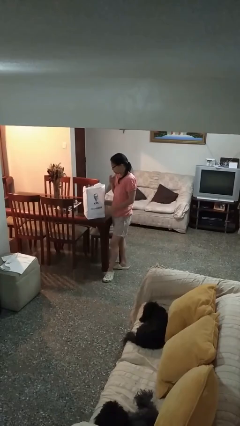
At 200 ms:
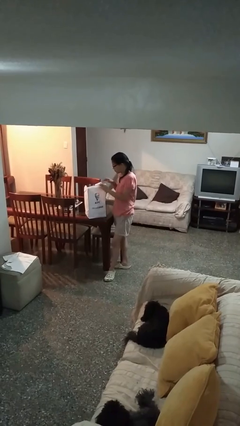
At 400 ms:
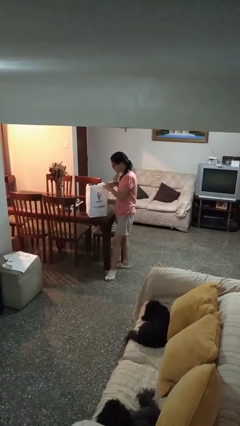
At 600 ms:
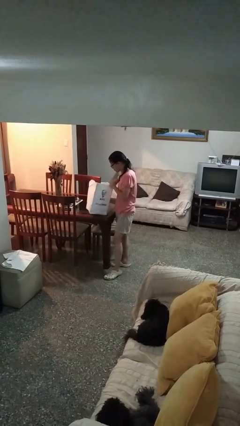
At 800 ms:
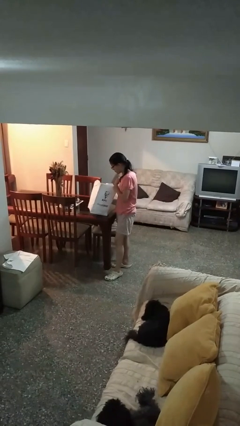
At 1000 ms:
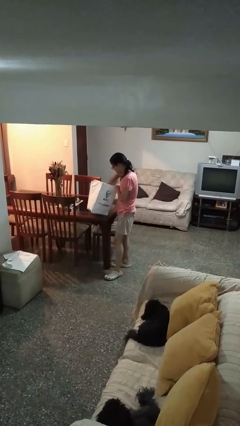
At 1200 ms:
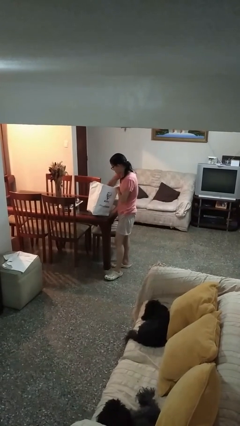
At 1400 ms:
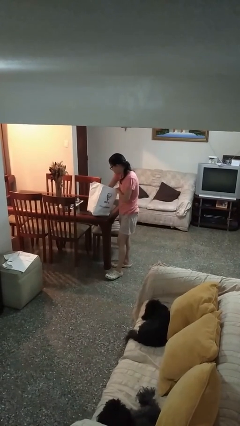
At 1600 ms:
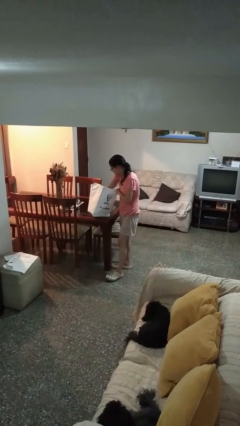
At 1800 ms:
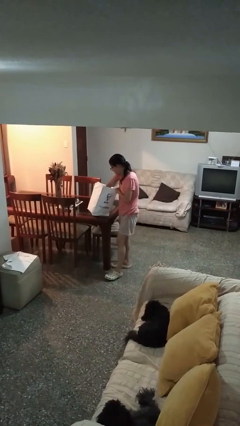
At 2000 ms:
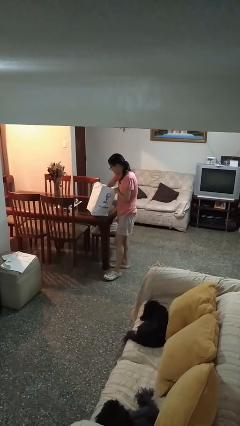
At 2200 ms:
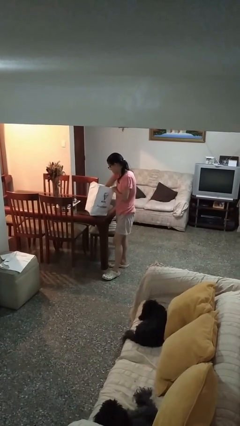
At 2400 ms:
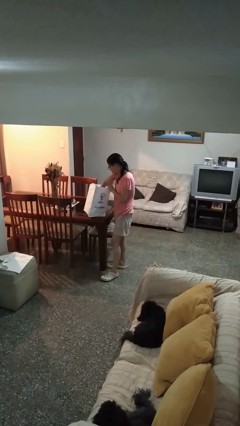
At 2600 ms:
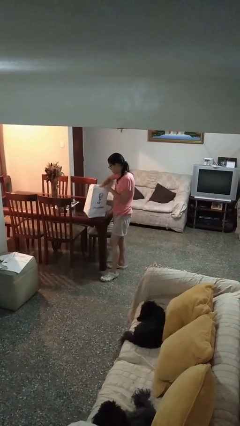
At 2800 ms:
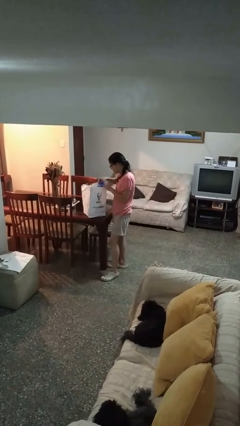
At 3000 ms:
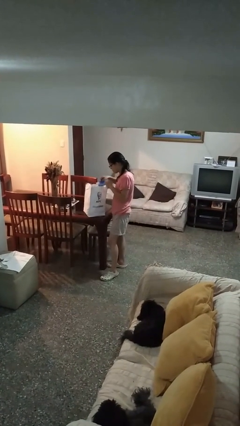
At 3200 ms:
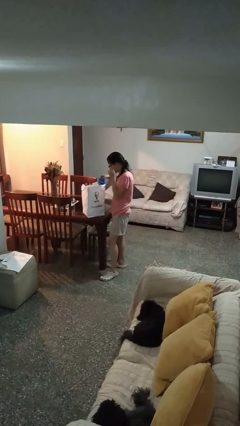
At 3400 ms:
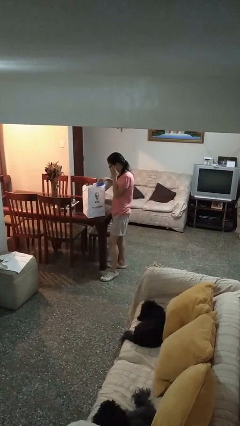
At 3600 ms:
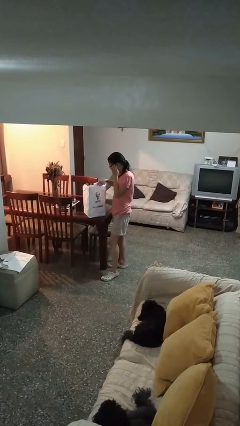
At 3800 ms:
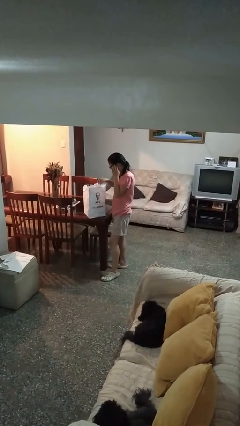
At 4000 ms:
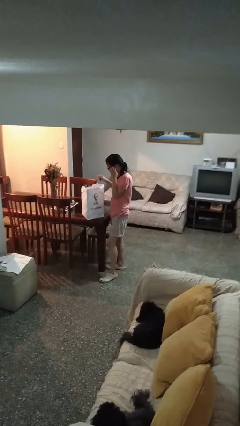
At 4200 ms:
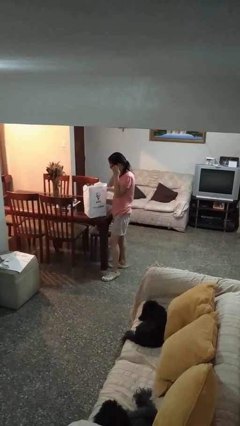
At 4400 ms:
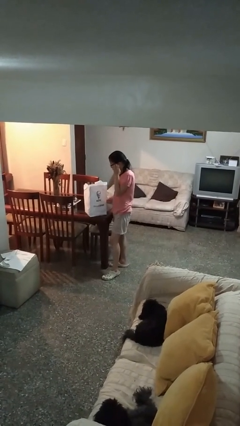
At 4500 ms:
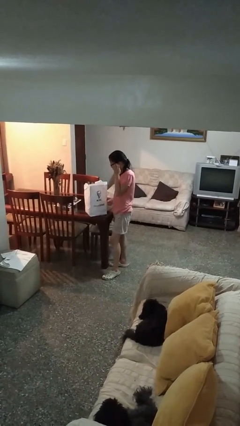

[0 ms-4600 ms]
person searches in bag

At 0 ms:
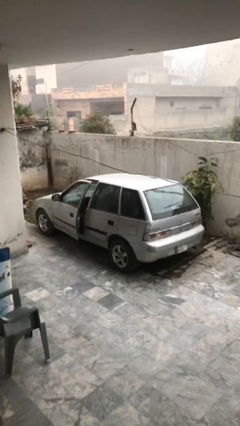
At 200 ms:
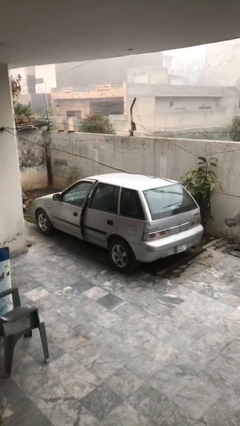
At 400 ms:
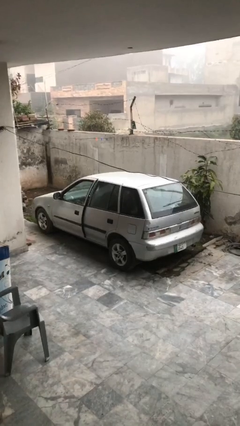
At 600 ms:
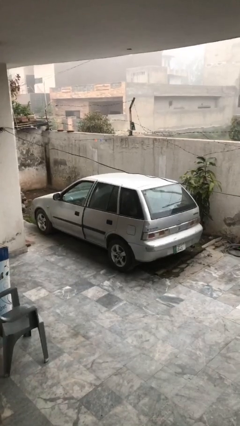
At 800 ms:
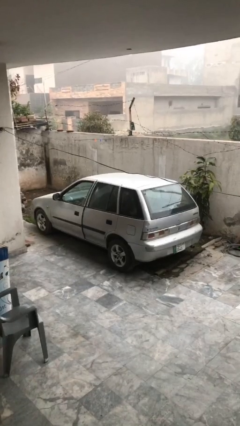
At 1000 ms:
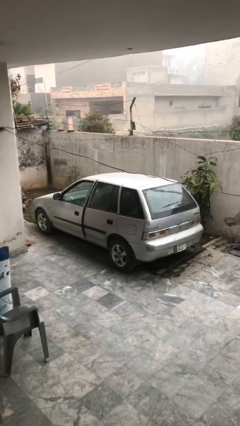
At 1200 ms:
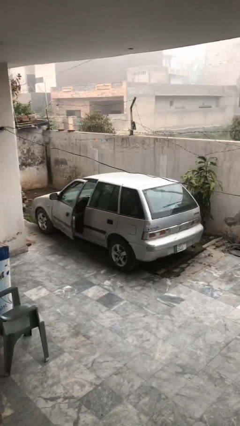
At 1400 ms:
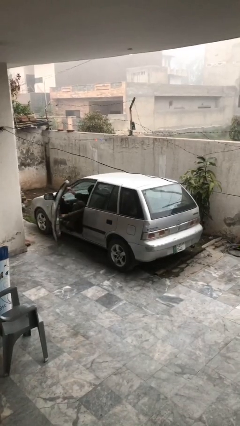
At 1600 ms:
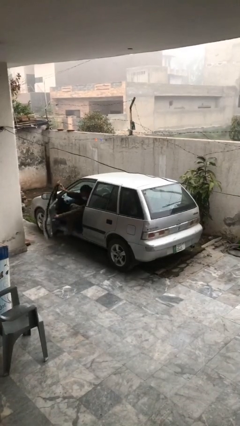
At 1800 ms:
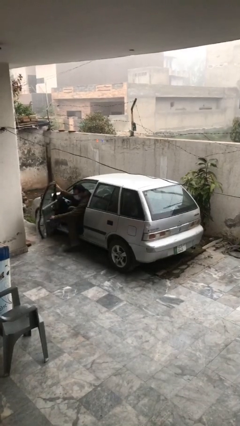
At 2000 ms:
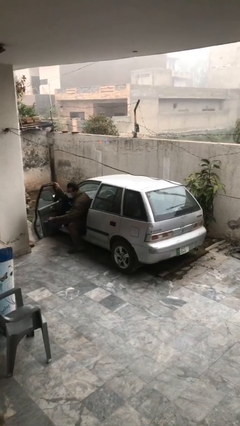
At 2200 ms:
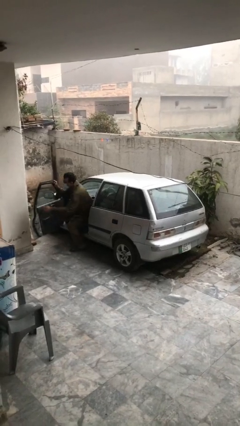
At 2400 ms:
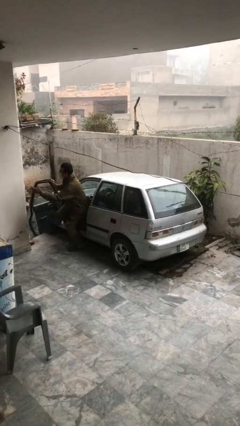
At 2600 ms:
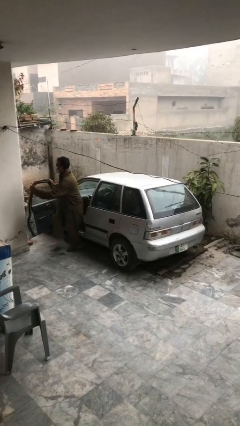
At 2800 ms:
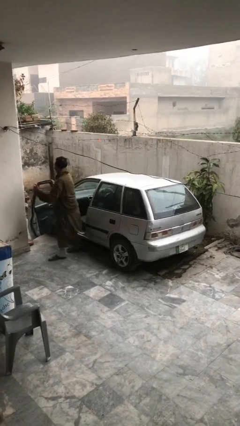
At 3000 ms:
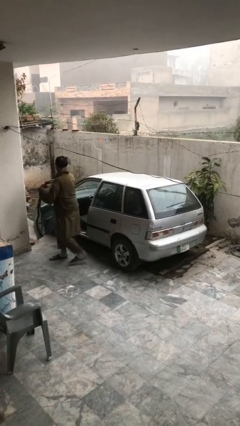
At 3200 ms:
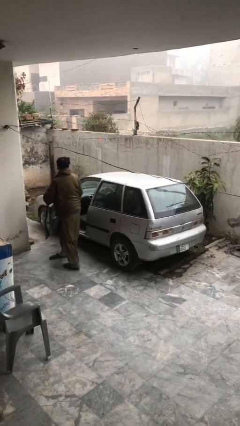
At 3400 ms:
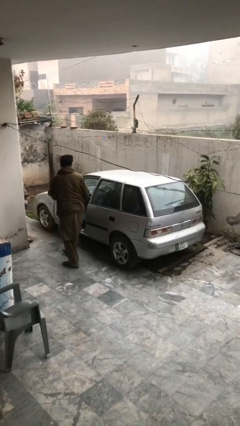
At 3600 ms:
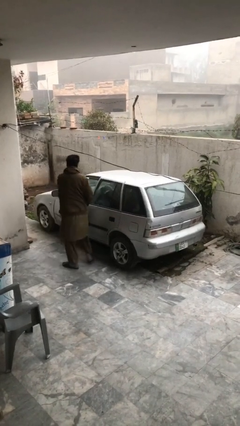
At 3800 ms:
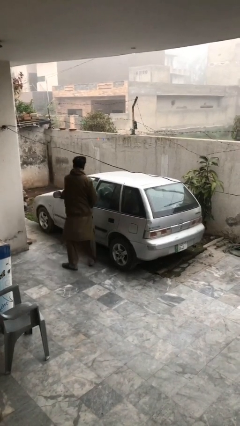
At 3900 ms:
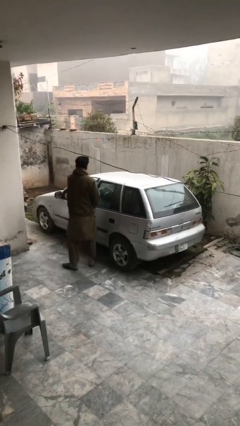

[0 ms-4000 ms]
car drops off person

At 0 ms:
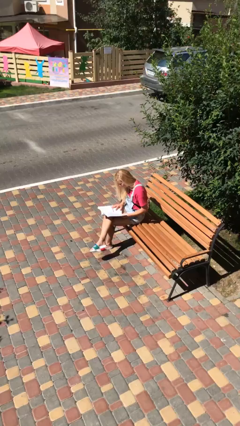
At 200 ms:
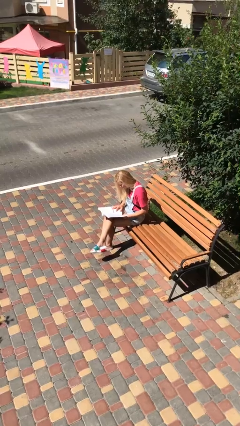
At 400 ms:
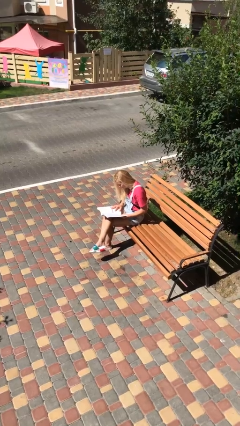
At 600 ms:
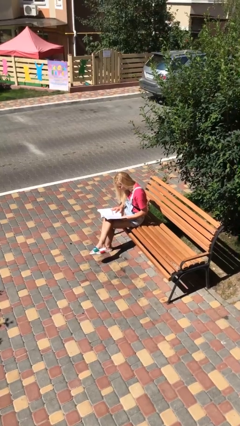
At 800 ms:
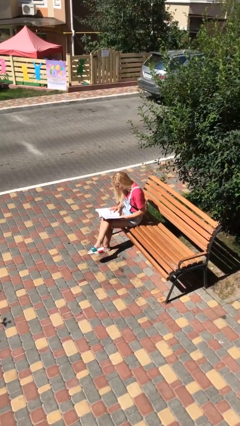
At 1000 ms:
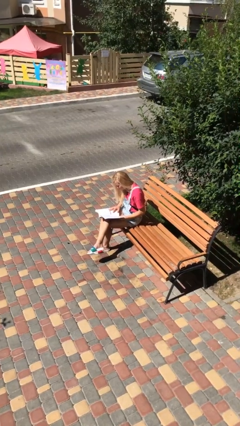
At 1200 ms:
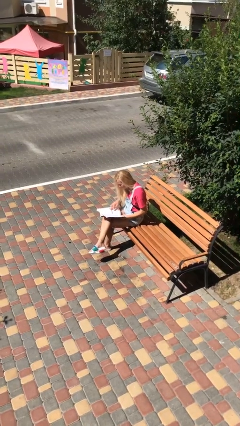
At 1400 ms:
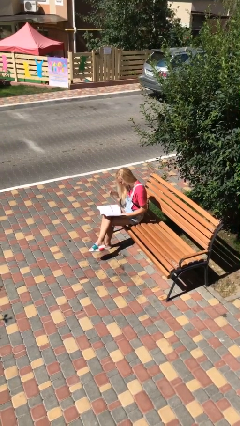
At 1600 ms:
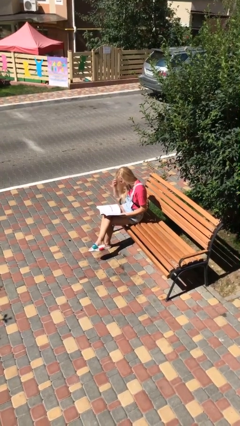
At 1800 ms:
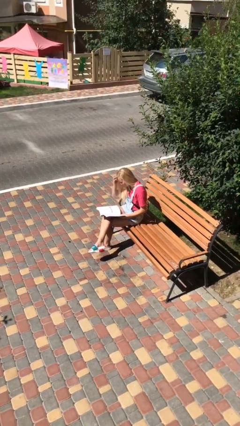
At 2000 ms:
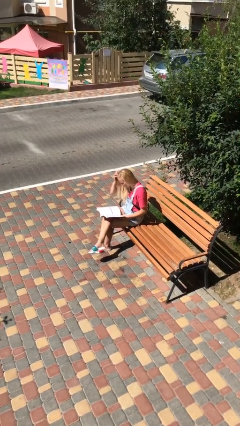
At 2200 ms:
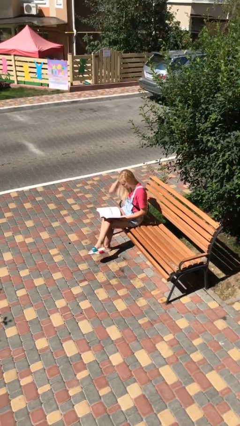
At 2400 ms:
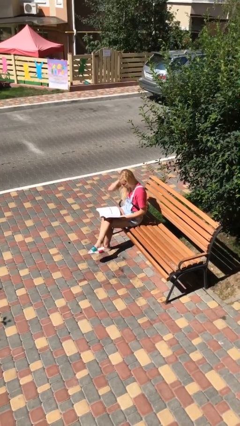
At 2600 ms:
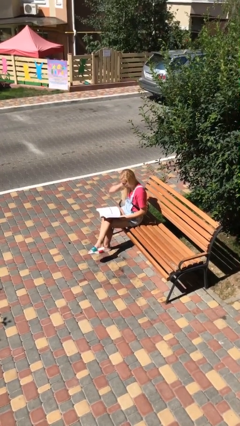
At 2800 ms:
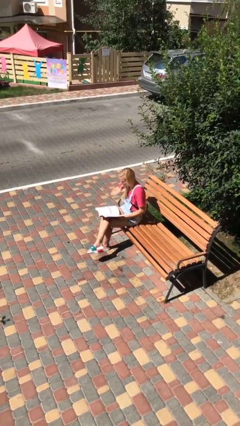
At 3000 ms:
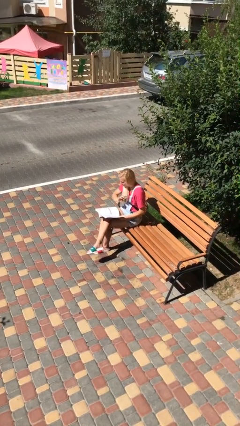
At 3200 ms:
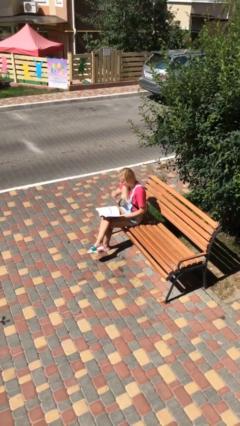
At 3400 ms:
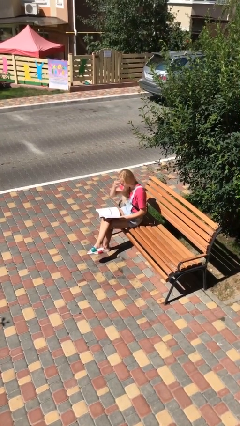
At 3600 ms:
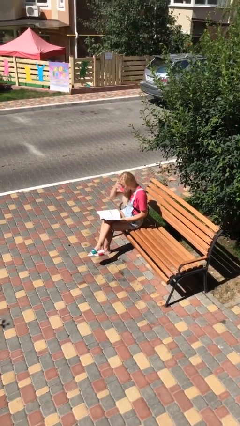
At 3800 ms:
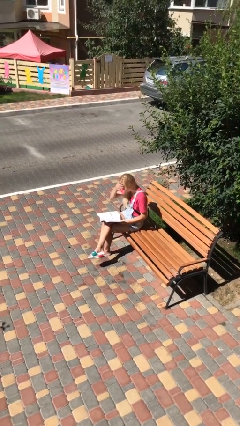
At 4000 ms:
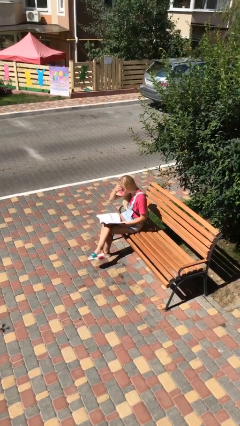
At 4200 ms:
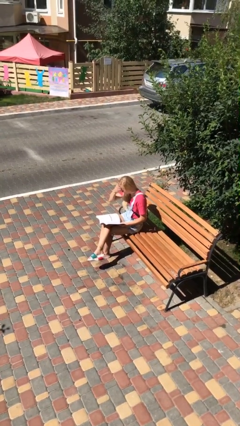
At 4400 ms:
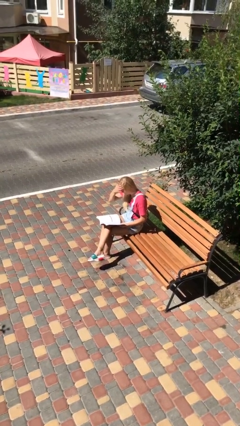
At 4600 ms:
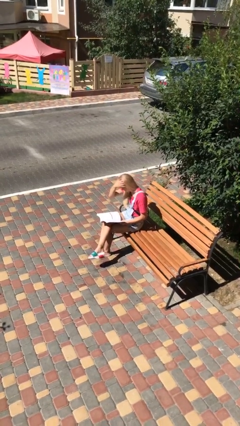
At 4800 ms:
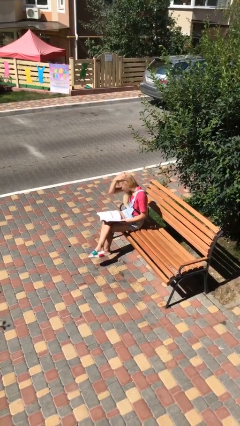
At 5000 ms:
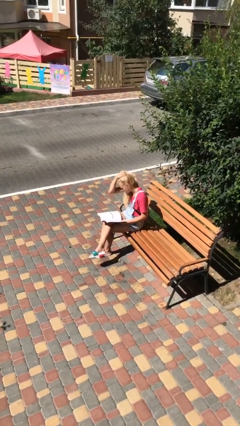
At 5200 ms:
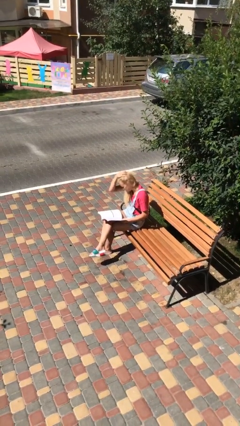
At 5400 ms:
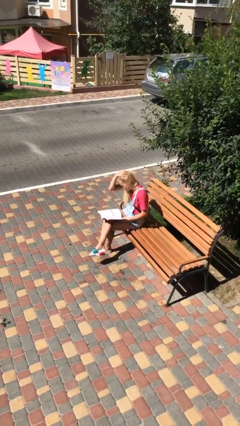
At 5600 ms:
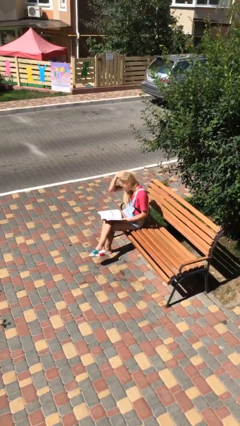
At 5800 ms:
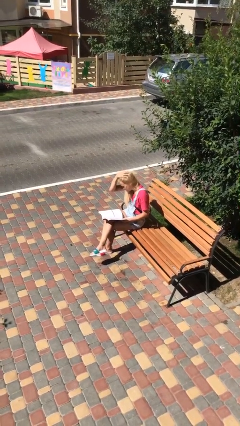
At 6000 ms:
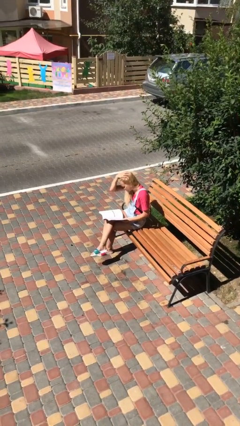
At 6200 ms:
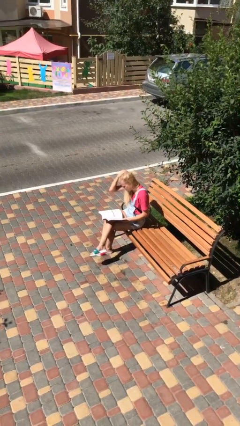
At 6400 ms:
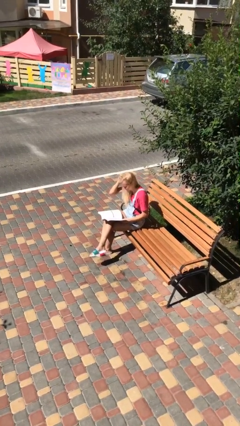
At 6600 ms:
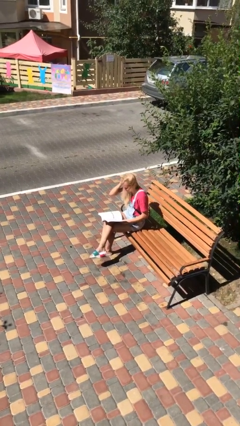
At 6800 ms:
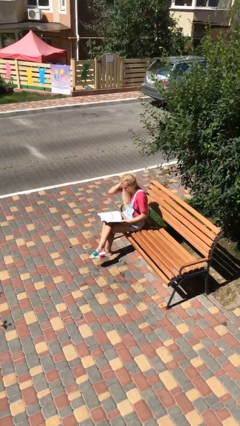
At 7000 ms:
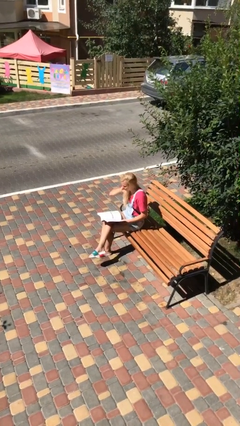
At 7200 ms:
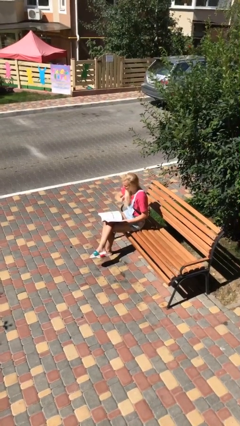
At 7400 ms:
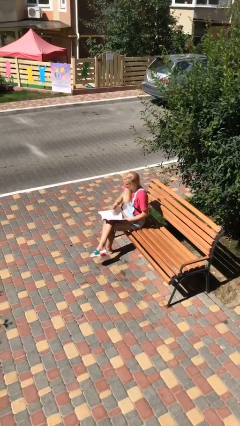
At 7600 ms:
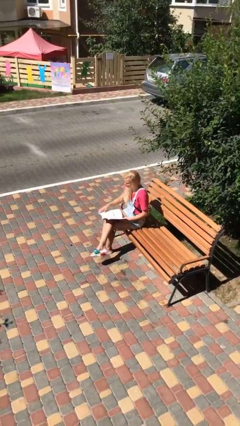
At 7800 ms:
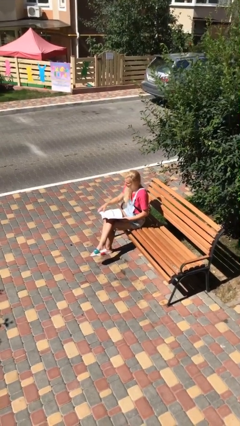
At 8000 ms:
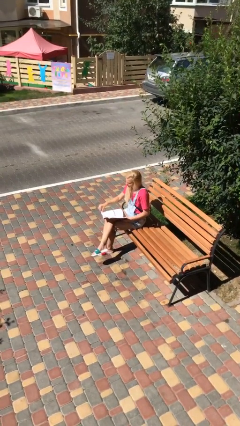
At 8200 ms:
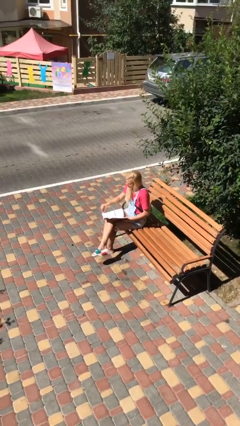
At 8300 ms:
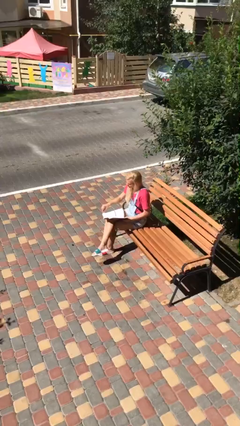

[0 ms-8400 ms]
person reads document

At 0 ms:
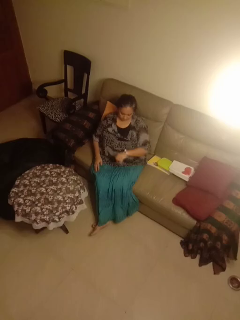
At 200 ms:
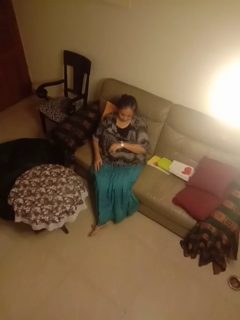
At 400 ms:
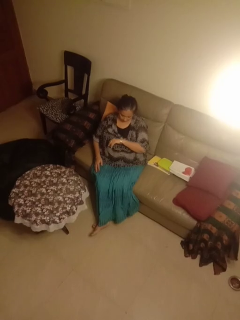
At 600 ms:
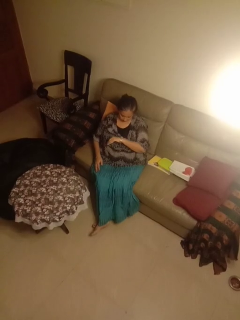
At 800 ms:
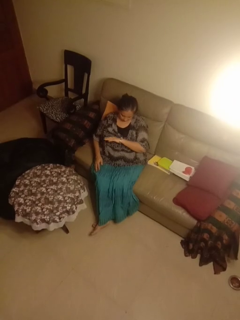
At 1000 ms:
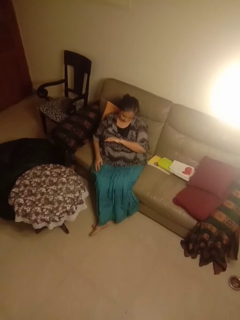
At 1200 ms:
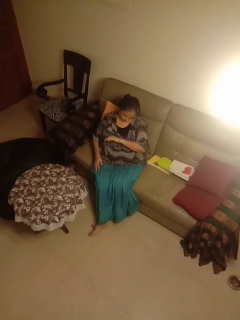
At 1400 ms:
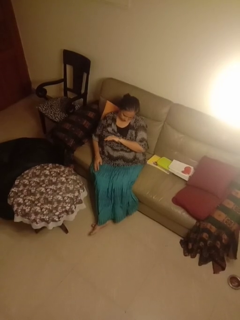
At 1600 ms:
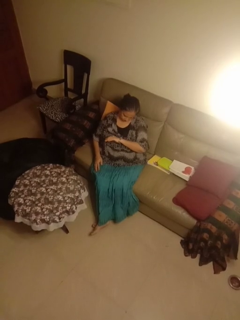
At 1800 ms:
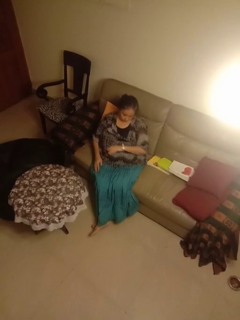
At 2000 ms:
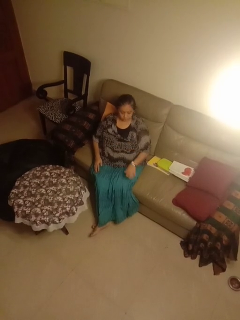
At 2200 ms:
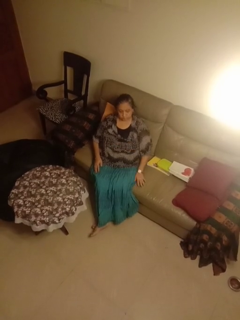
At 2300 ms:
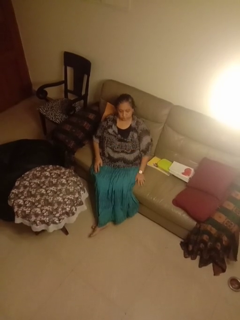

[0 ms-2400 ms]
person looks at wristwatch
